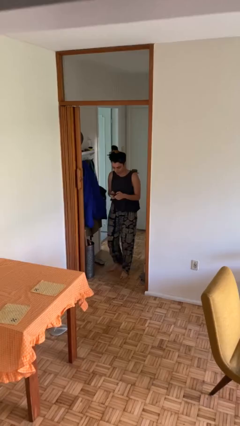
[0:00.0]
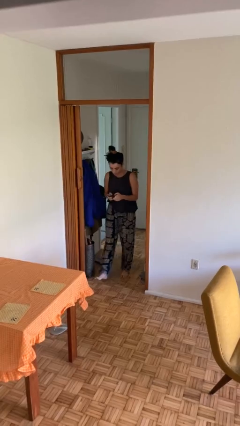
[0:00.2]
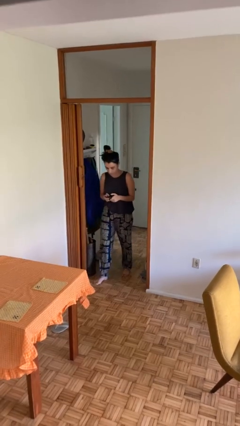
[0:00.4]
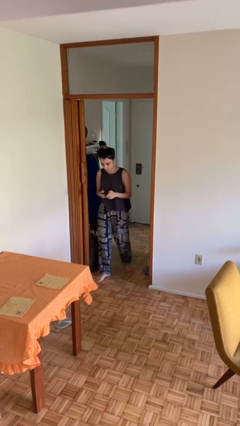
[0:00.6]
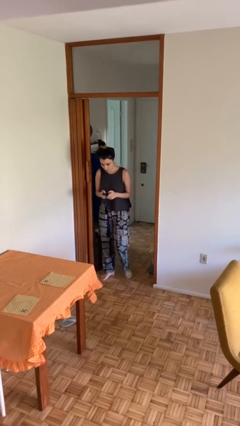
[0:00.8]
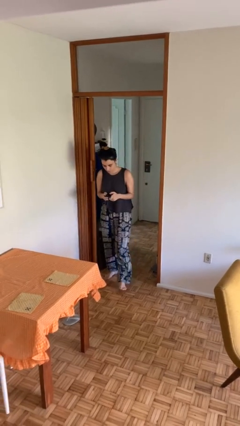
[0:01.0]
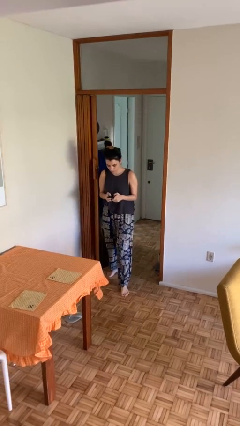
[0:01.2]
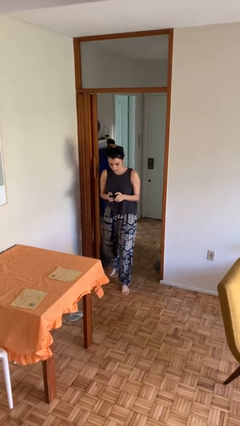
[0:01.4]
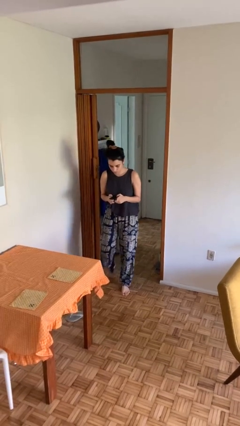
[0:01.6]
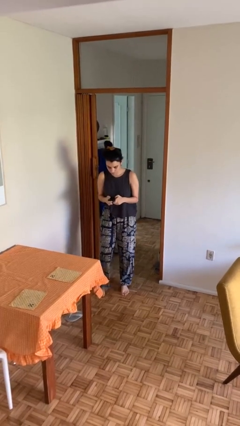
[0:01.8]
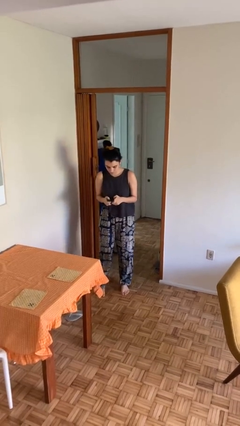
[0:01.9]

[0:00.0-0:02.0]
person enters scene through structure

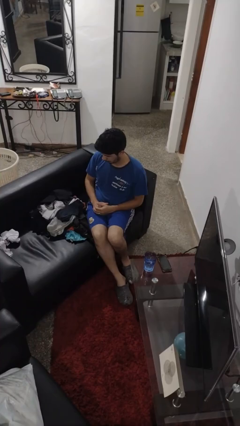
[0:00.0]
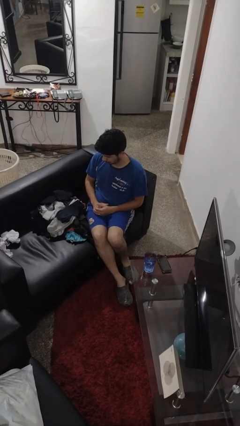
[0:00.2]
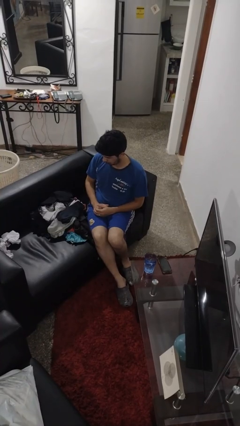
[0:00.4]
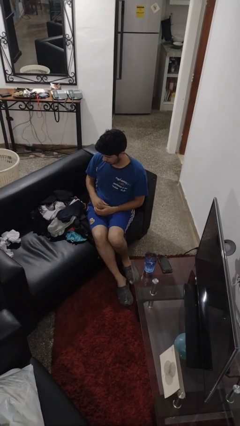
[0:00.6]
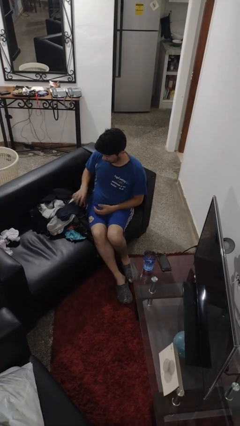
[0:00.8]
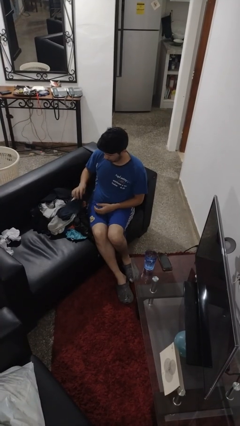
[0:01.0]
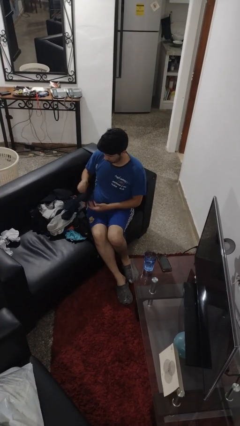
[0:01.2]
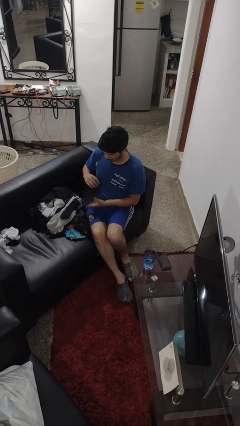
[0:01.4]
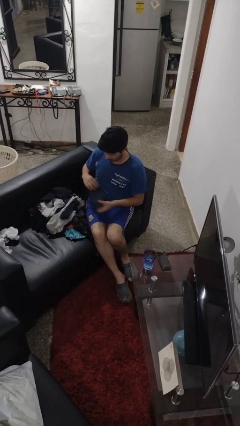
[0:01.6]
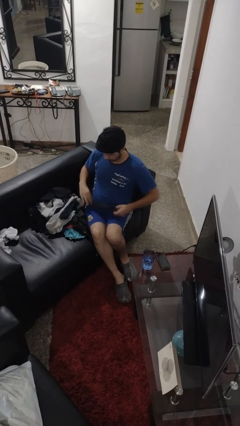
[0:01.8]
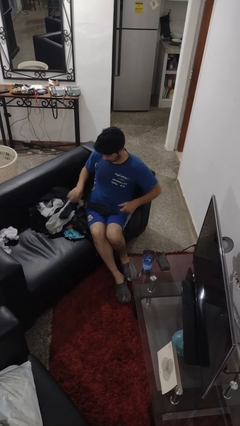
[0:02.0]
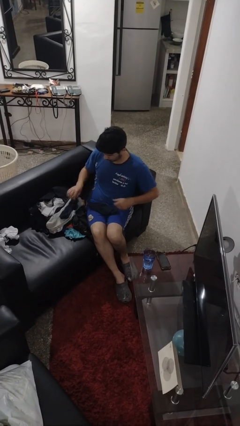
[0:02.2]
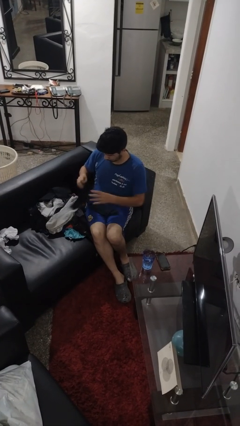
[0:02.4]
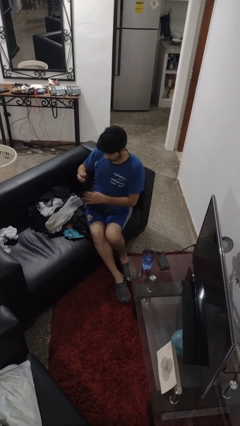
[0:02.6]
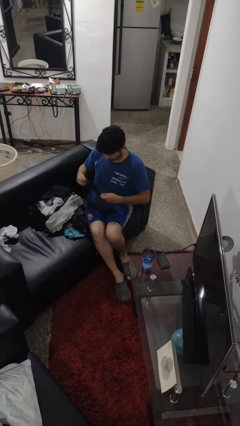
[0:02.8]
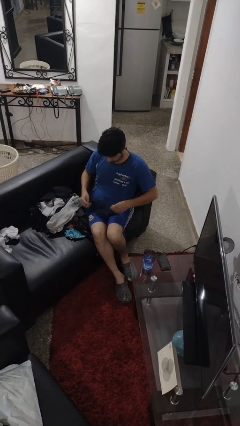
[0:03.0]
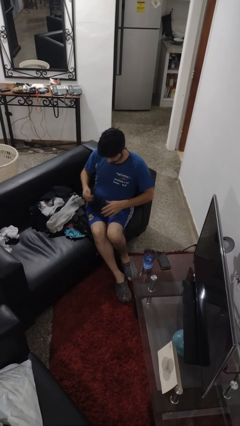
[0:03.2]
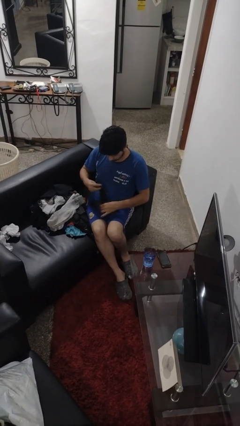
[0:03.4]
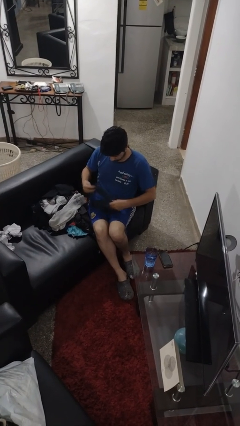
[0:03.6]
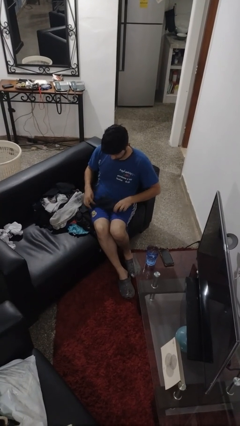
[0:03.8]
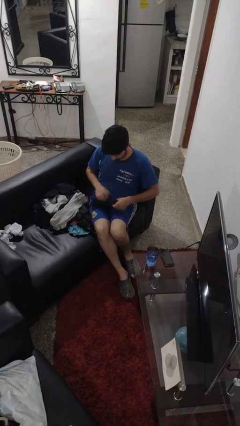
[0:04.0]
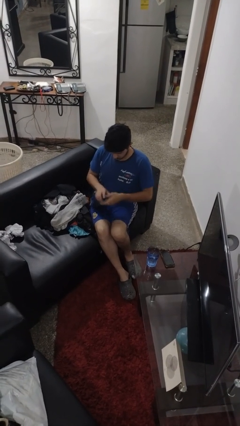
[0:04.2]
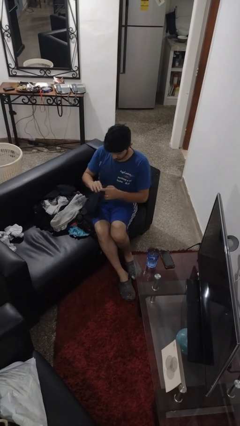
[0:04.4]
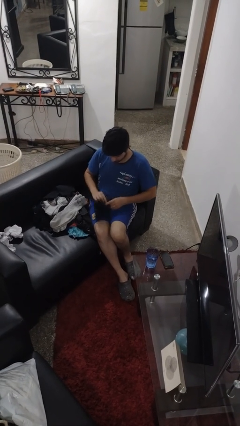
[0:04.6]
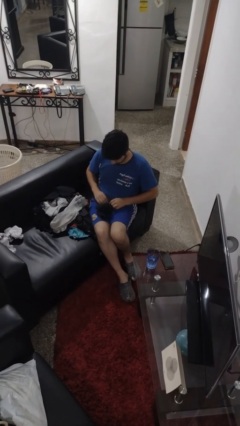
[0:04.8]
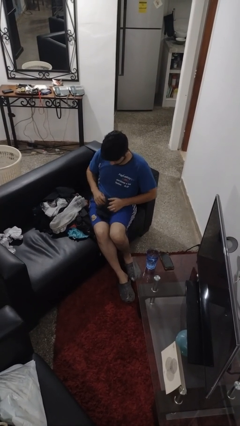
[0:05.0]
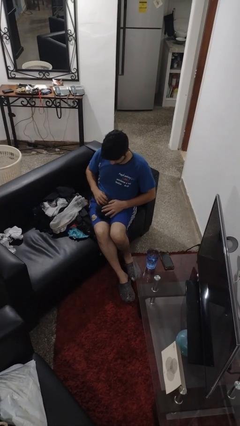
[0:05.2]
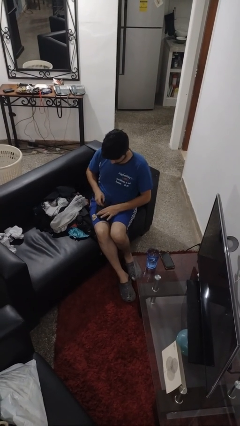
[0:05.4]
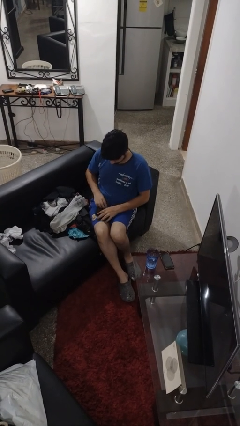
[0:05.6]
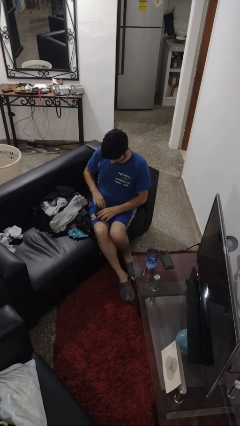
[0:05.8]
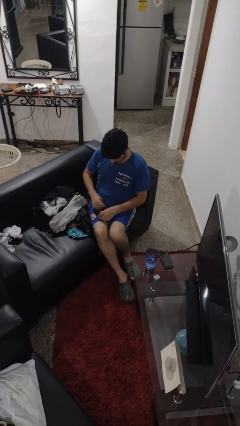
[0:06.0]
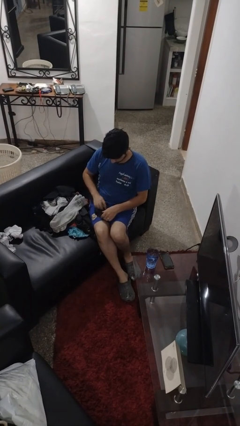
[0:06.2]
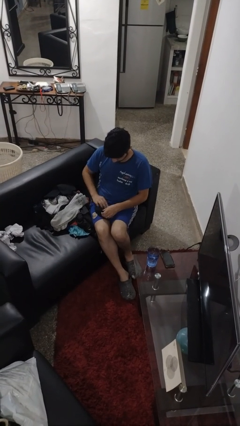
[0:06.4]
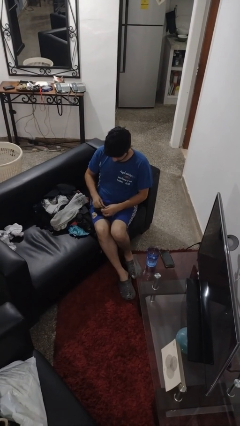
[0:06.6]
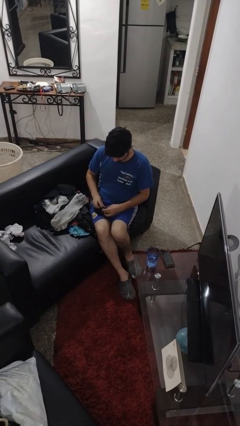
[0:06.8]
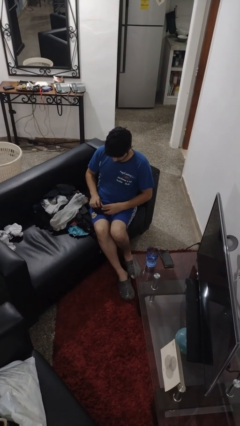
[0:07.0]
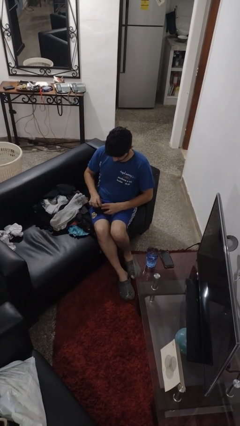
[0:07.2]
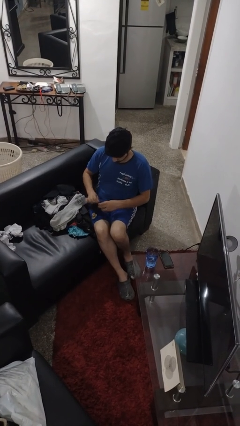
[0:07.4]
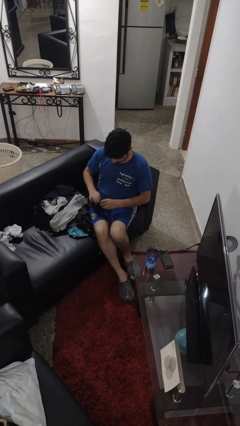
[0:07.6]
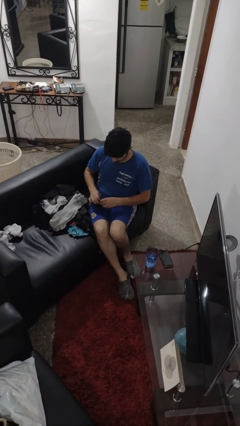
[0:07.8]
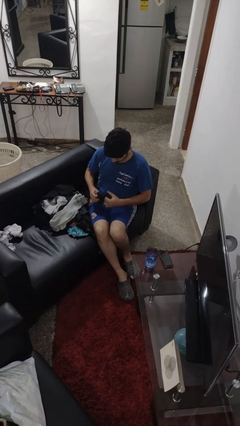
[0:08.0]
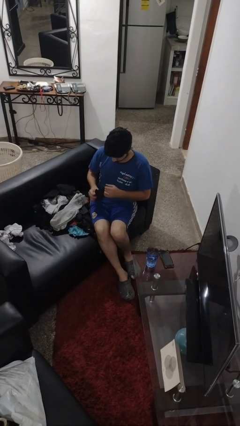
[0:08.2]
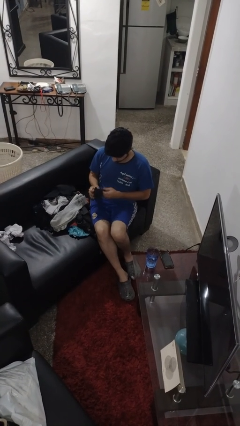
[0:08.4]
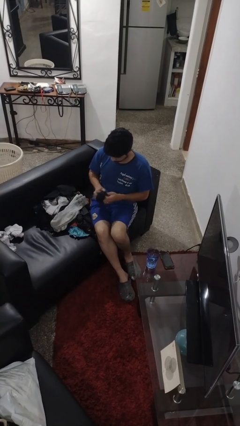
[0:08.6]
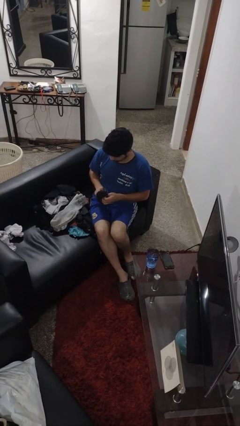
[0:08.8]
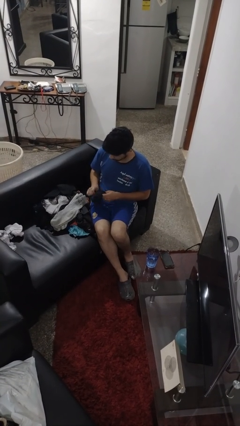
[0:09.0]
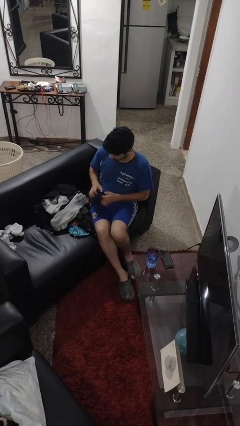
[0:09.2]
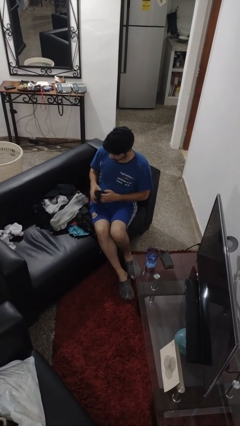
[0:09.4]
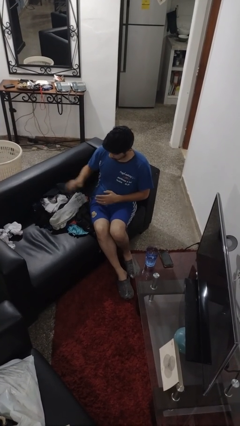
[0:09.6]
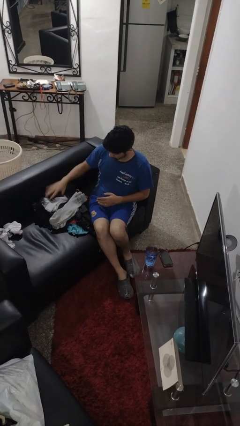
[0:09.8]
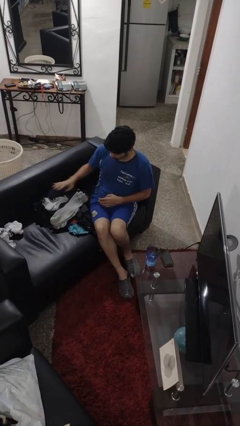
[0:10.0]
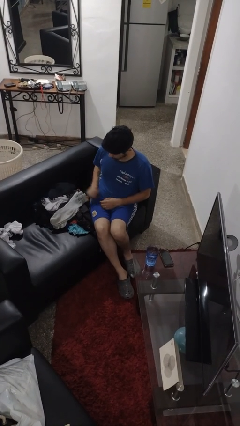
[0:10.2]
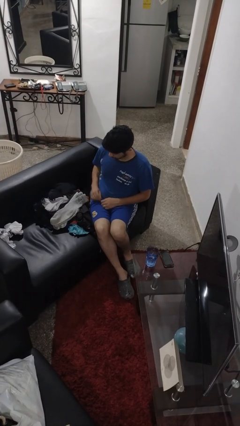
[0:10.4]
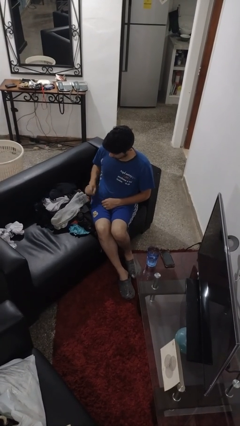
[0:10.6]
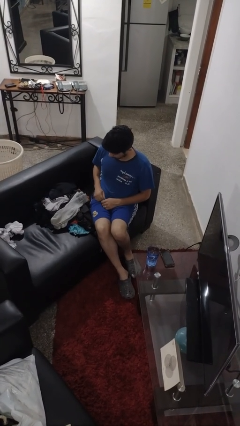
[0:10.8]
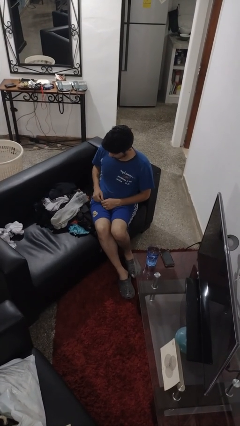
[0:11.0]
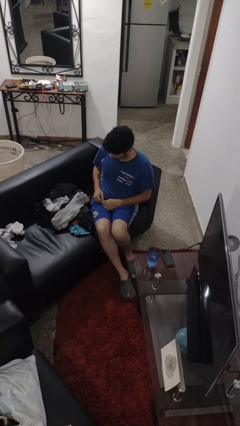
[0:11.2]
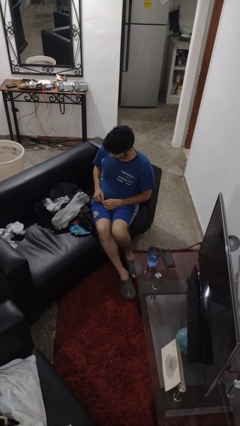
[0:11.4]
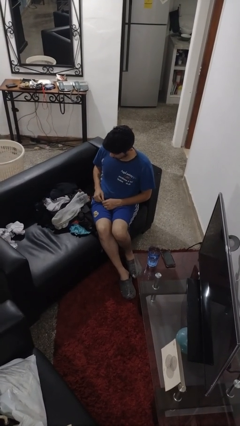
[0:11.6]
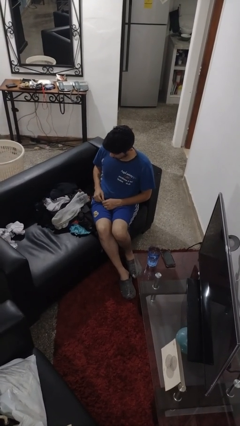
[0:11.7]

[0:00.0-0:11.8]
person folds socks

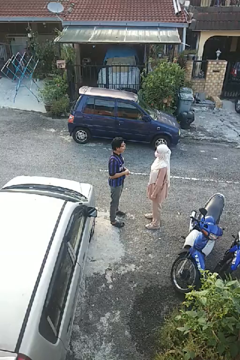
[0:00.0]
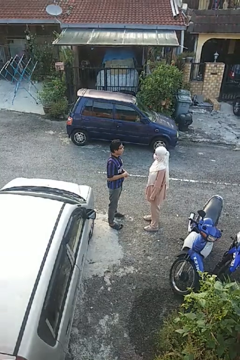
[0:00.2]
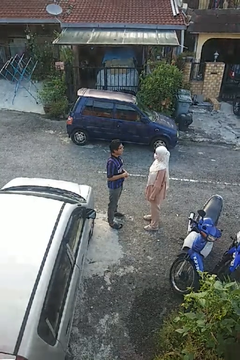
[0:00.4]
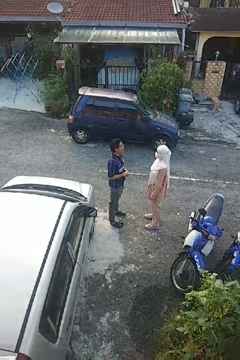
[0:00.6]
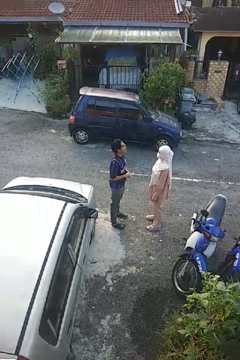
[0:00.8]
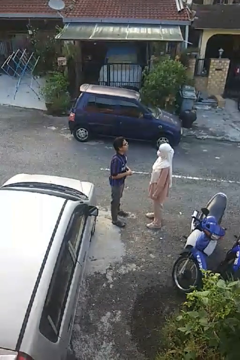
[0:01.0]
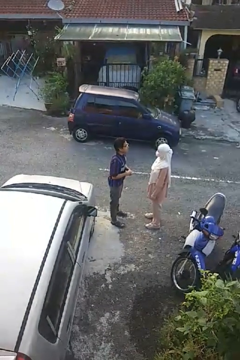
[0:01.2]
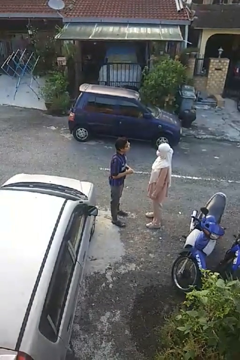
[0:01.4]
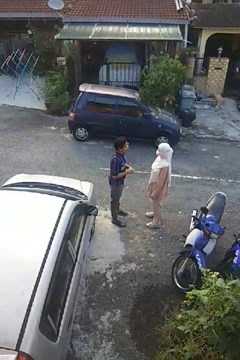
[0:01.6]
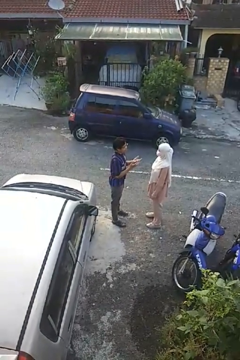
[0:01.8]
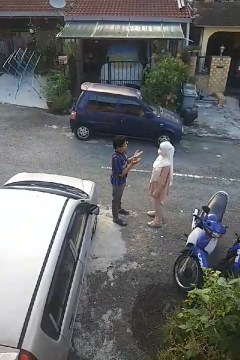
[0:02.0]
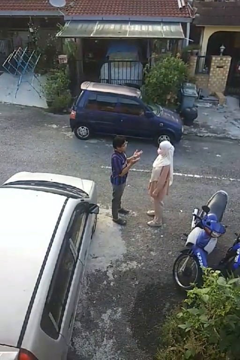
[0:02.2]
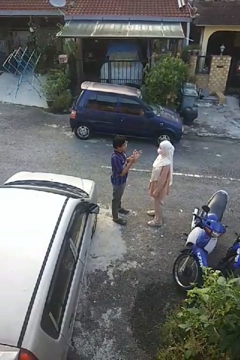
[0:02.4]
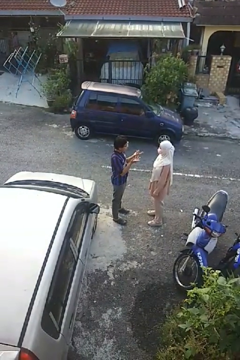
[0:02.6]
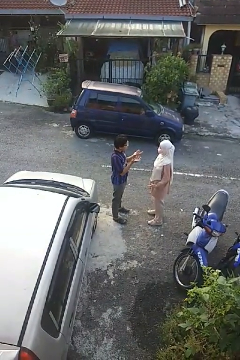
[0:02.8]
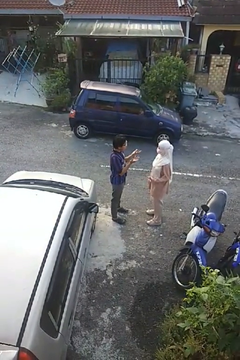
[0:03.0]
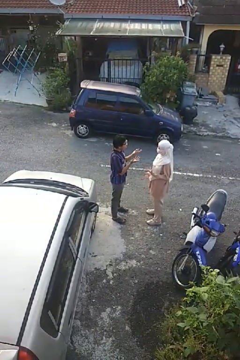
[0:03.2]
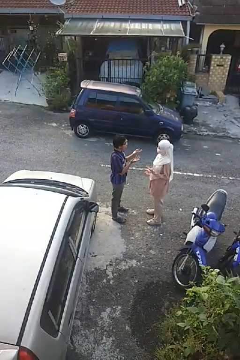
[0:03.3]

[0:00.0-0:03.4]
person talks to person

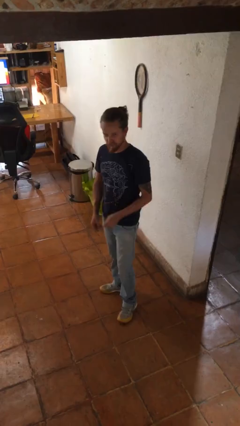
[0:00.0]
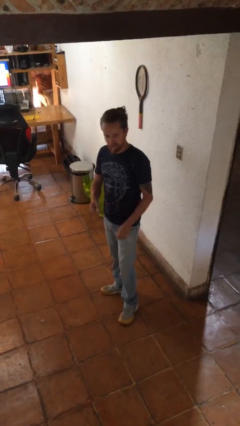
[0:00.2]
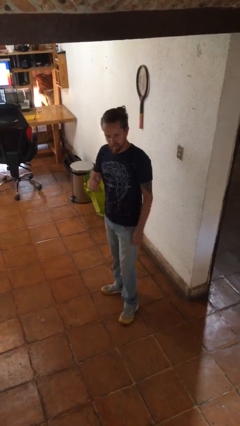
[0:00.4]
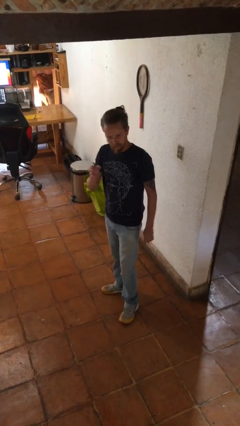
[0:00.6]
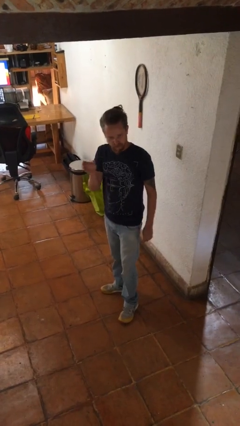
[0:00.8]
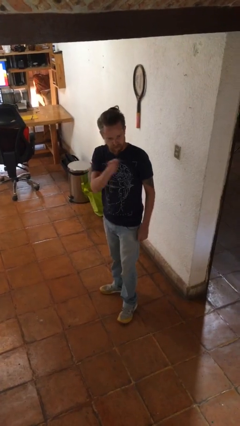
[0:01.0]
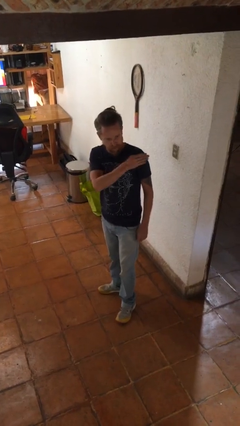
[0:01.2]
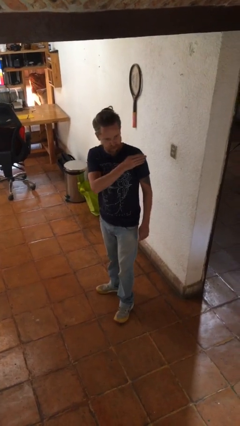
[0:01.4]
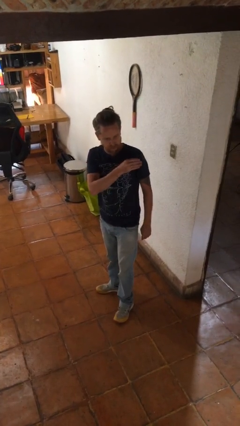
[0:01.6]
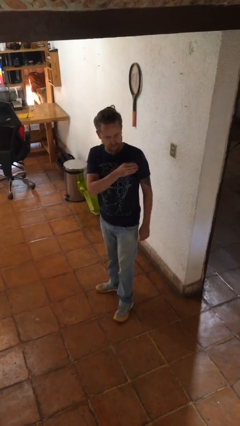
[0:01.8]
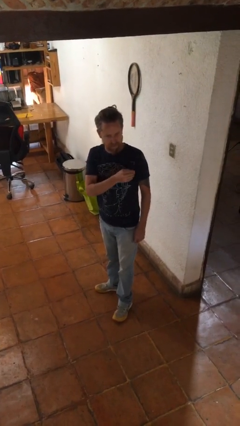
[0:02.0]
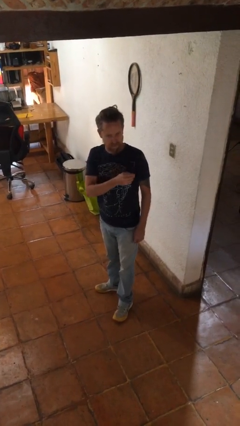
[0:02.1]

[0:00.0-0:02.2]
person gestures swipe left
